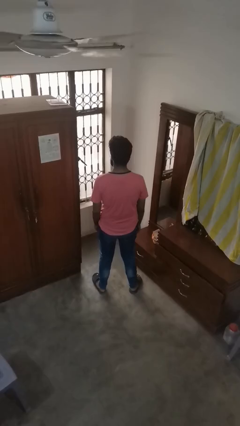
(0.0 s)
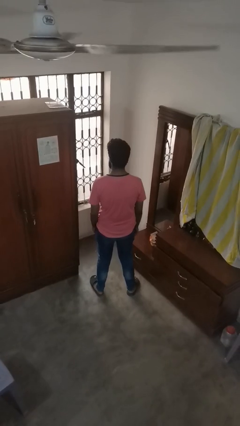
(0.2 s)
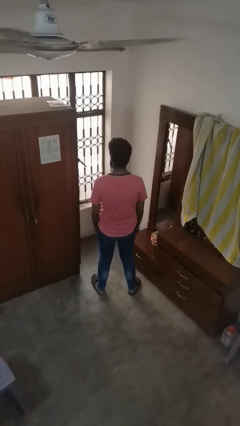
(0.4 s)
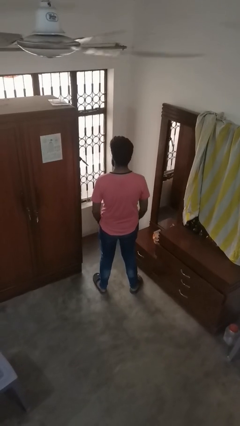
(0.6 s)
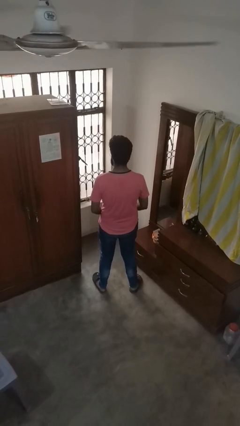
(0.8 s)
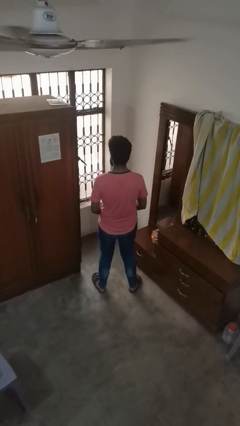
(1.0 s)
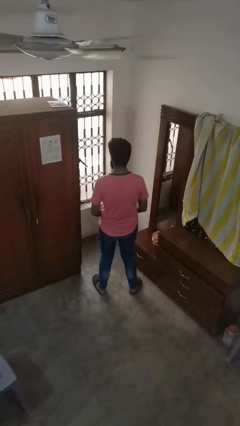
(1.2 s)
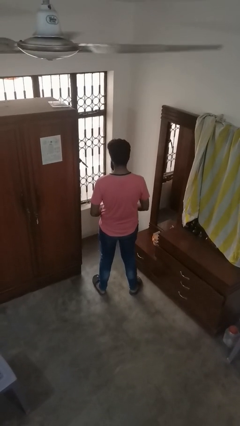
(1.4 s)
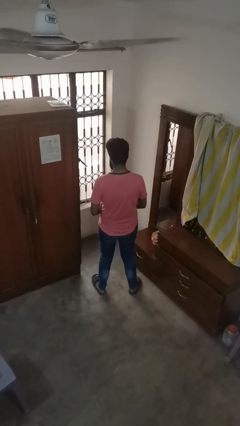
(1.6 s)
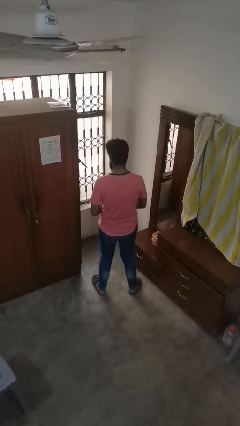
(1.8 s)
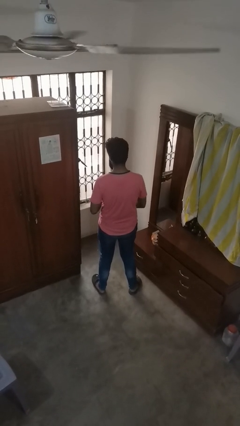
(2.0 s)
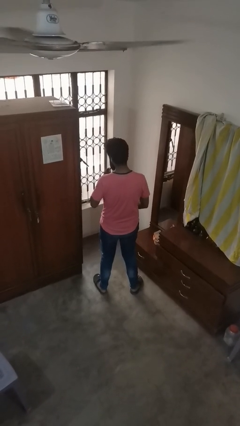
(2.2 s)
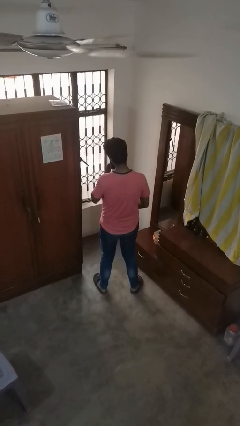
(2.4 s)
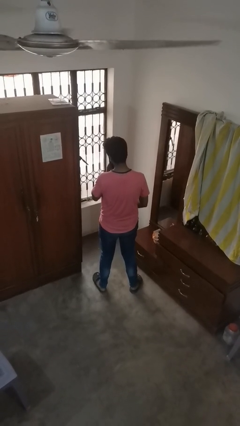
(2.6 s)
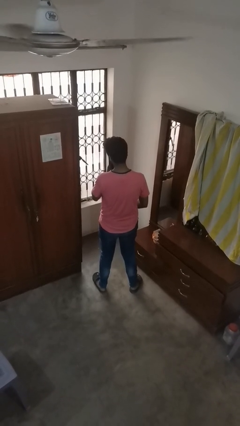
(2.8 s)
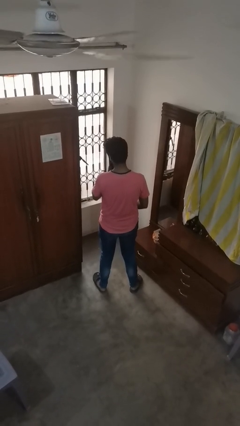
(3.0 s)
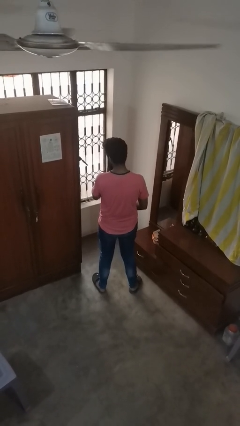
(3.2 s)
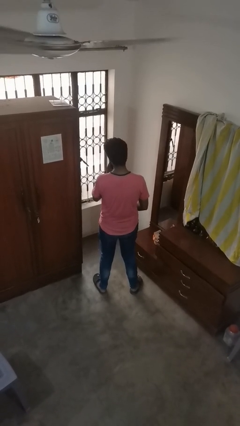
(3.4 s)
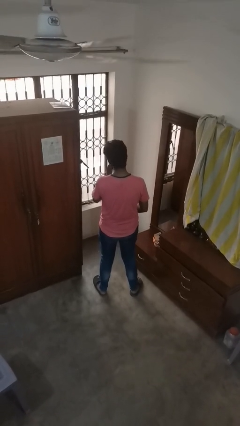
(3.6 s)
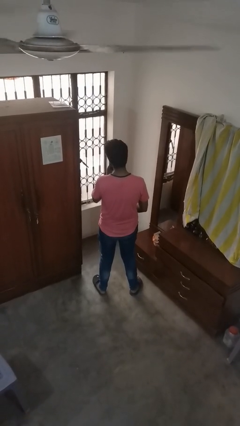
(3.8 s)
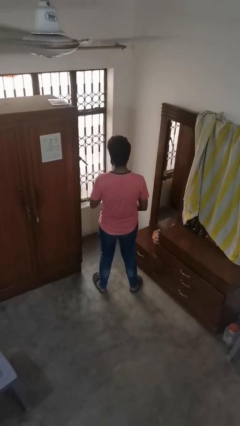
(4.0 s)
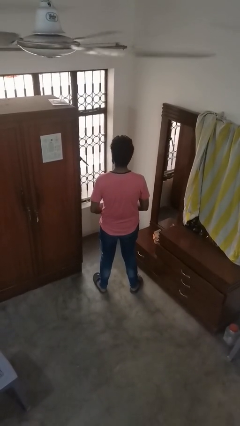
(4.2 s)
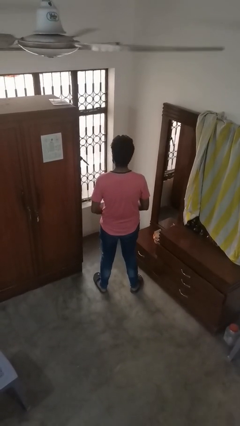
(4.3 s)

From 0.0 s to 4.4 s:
person applies lip makeup

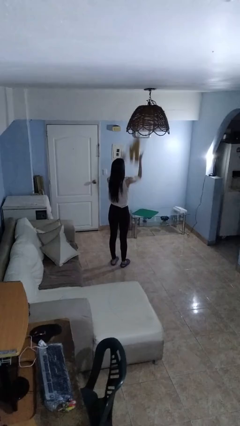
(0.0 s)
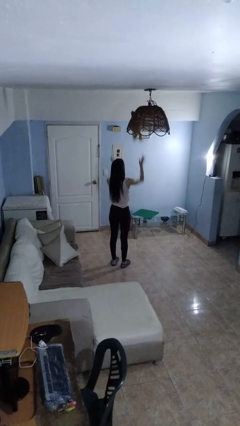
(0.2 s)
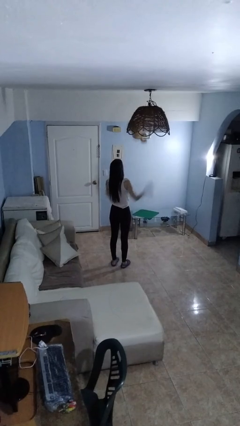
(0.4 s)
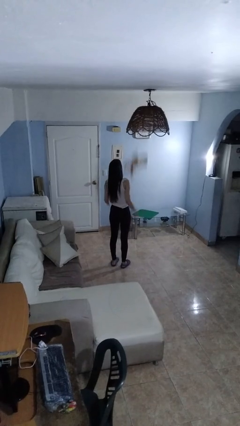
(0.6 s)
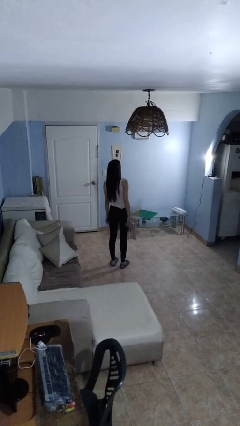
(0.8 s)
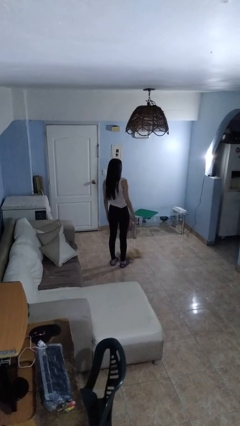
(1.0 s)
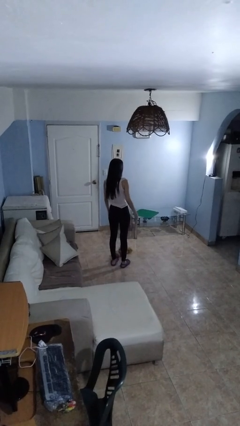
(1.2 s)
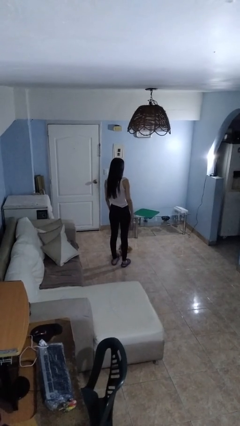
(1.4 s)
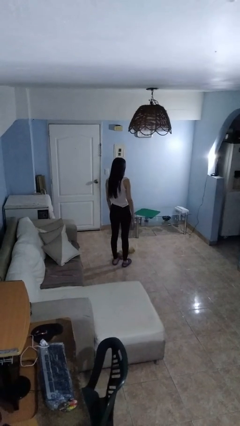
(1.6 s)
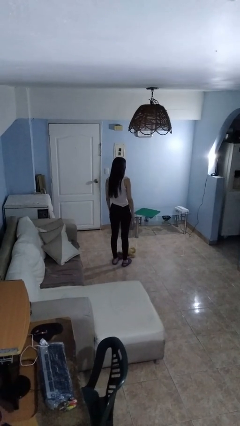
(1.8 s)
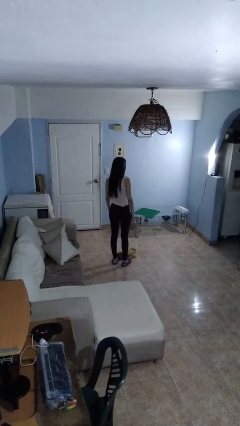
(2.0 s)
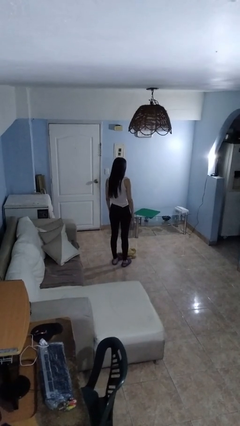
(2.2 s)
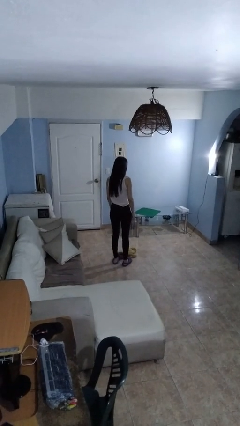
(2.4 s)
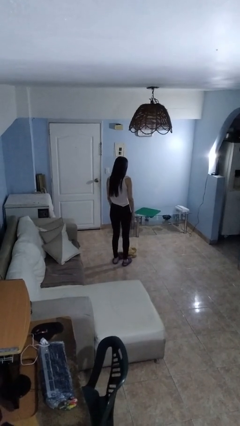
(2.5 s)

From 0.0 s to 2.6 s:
person throws object into air

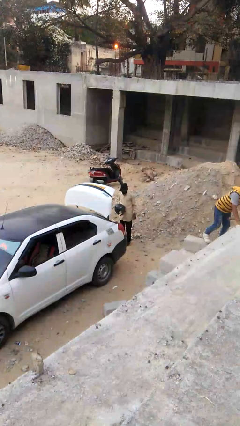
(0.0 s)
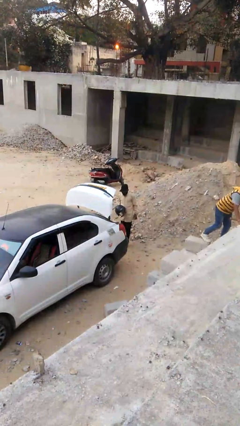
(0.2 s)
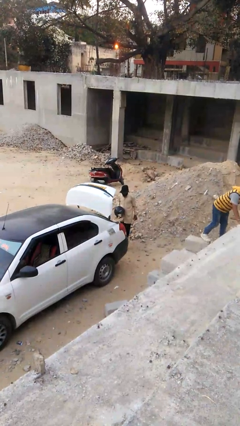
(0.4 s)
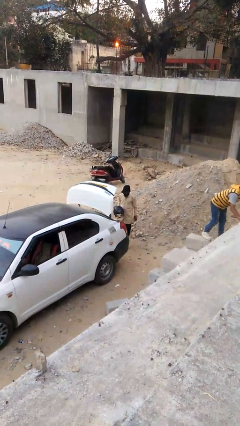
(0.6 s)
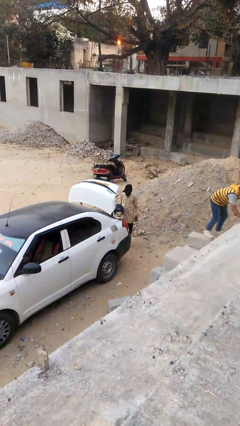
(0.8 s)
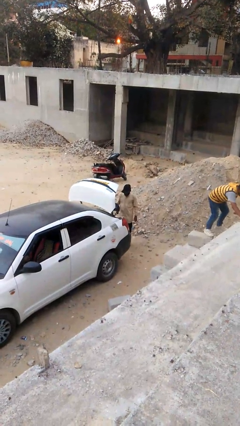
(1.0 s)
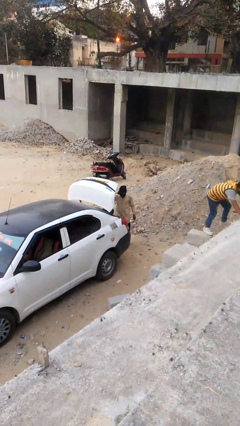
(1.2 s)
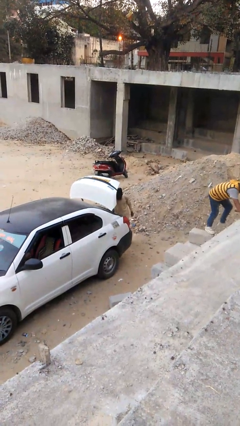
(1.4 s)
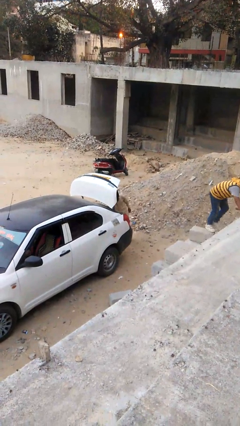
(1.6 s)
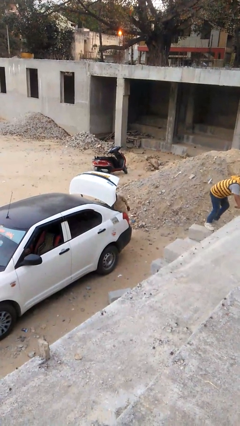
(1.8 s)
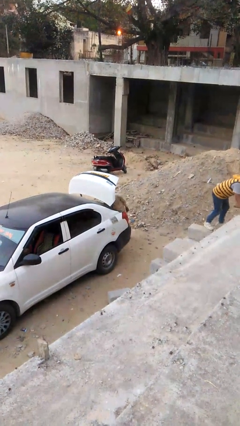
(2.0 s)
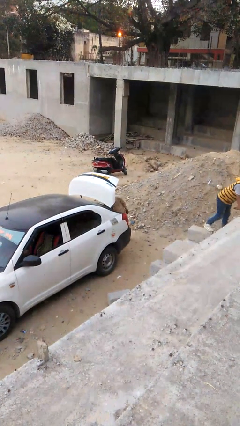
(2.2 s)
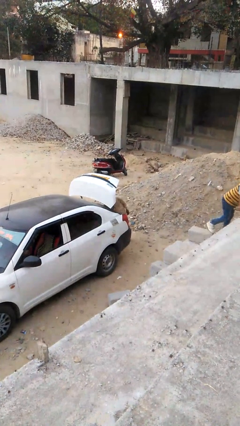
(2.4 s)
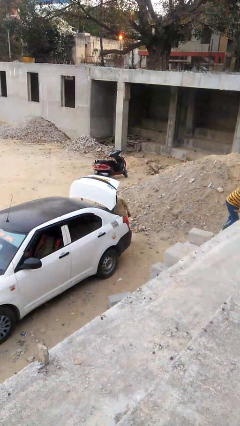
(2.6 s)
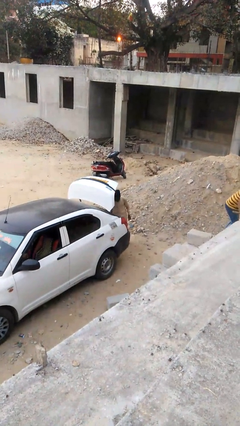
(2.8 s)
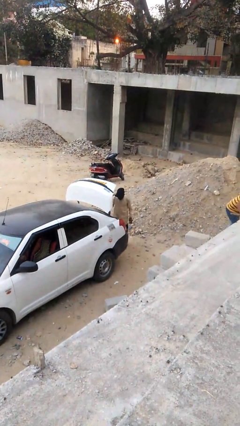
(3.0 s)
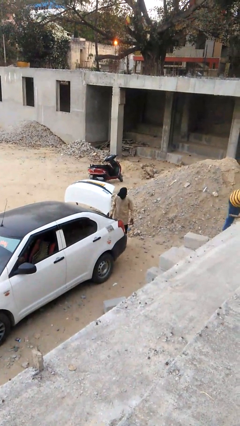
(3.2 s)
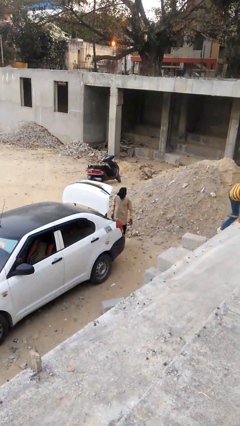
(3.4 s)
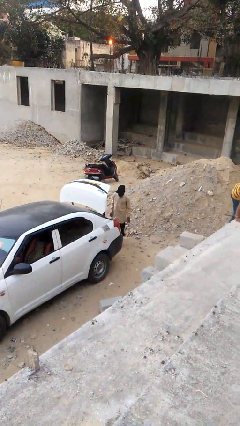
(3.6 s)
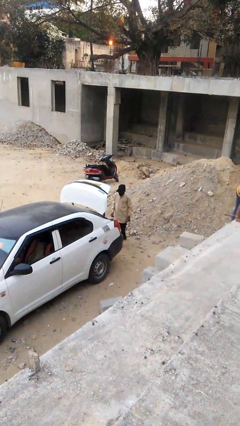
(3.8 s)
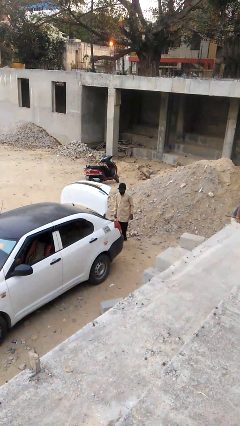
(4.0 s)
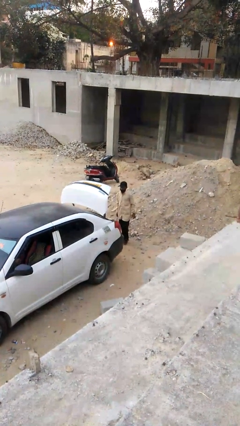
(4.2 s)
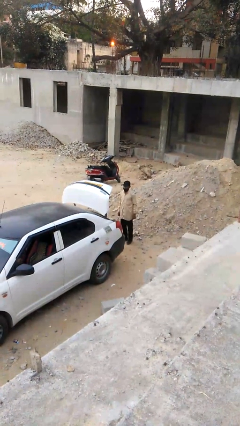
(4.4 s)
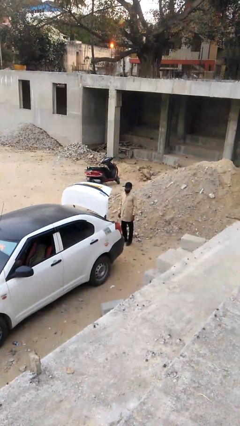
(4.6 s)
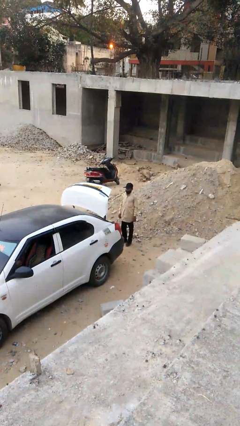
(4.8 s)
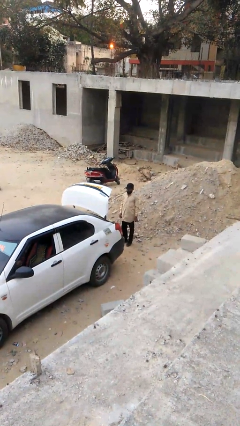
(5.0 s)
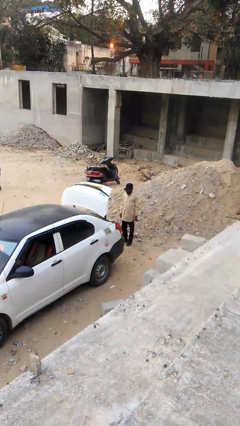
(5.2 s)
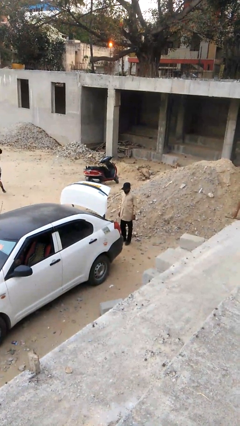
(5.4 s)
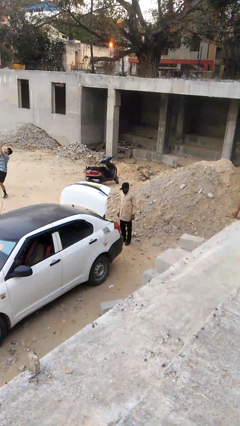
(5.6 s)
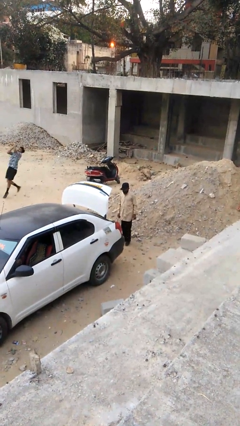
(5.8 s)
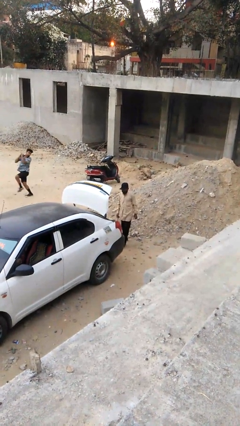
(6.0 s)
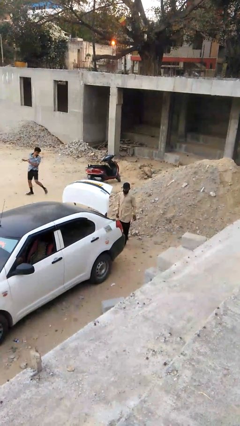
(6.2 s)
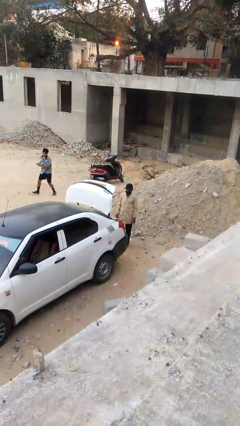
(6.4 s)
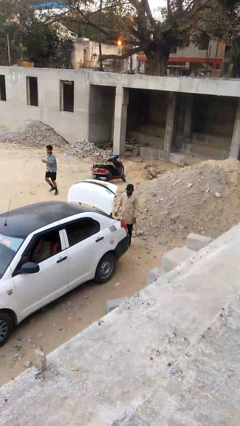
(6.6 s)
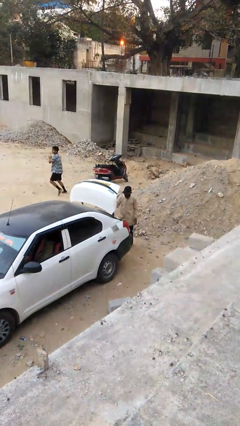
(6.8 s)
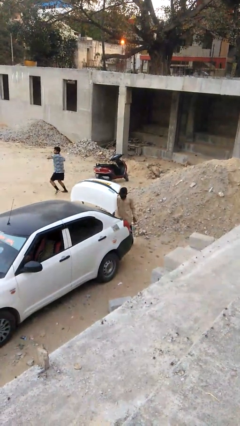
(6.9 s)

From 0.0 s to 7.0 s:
person loads car

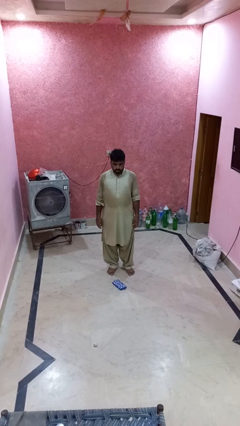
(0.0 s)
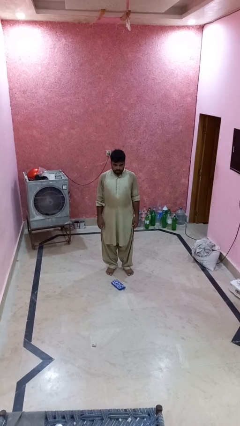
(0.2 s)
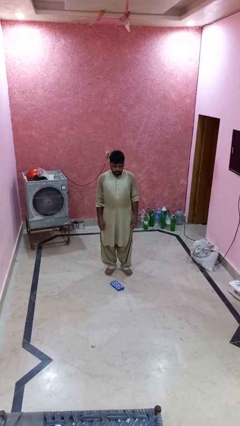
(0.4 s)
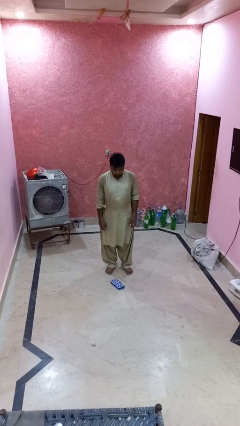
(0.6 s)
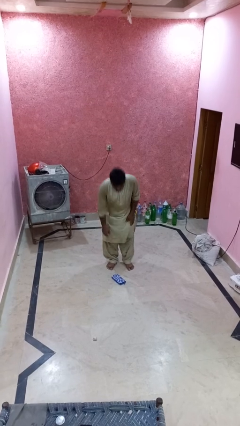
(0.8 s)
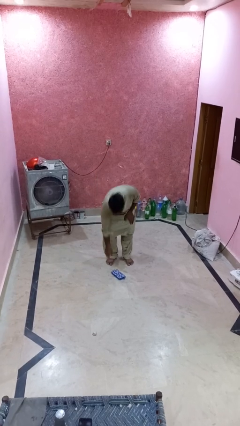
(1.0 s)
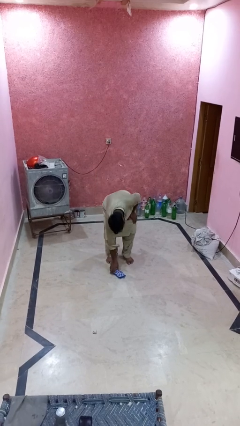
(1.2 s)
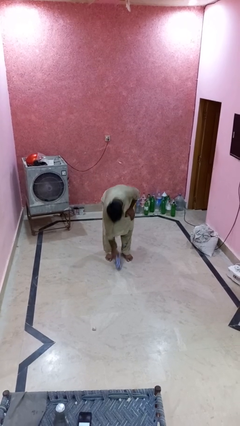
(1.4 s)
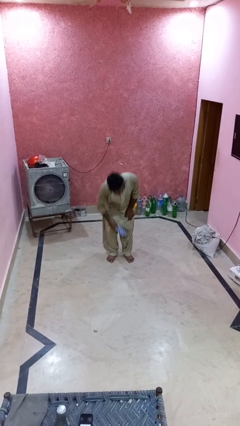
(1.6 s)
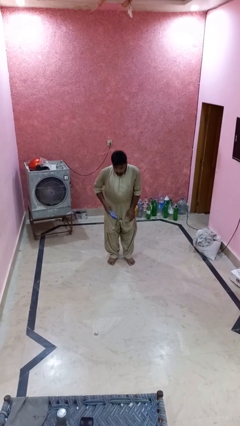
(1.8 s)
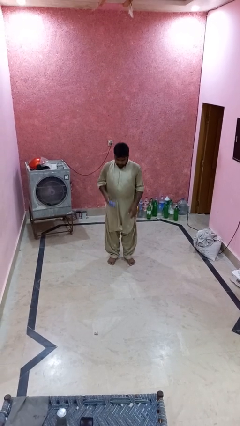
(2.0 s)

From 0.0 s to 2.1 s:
person picks up object from floor

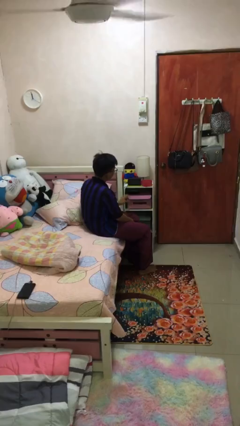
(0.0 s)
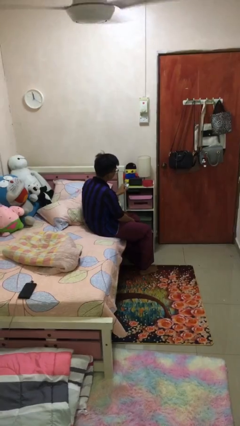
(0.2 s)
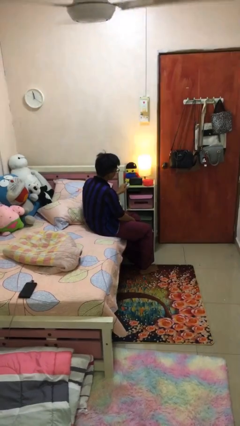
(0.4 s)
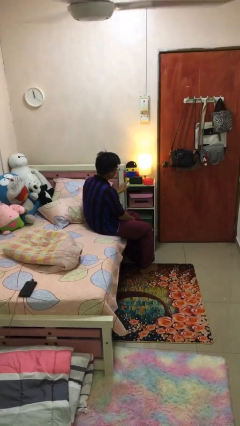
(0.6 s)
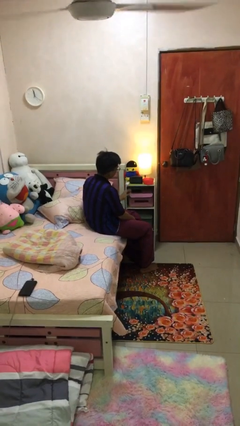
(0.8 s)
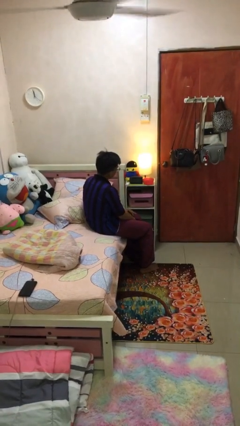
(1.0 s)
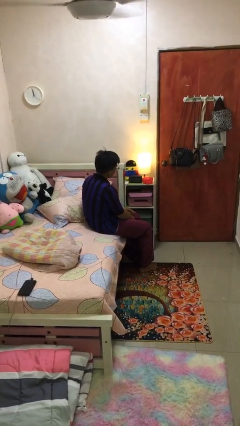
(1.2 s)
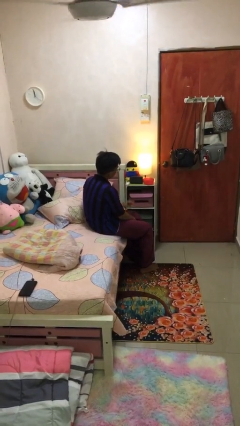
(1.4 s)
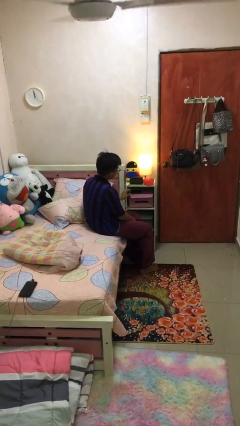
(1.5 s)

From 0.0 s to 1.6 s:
person turns on lamp
